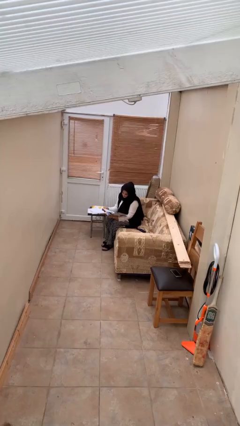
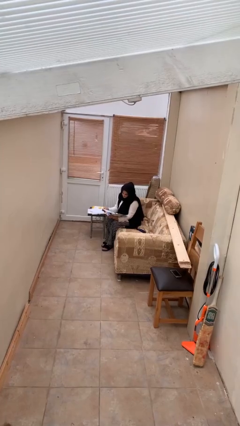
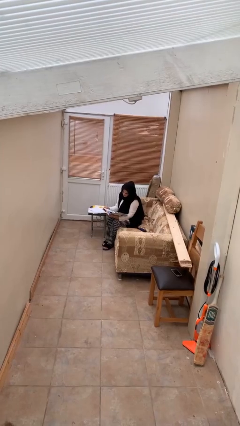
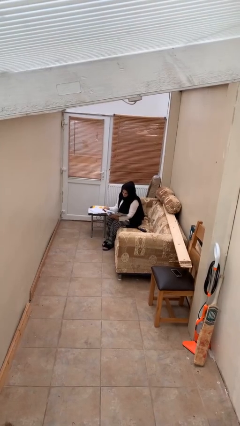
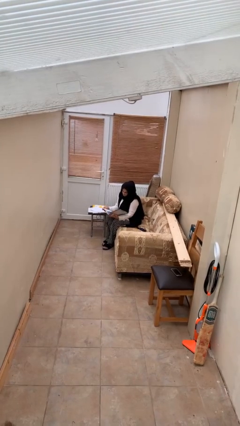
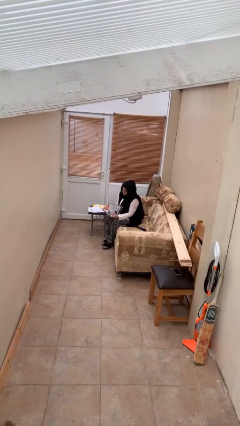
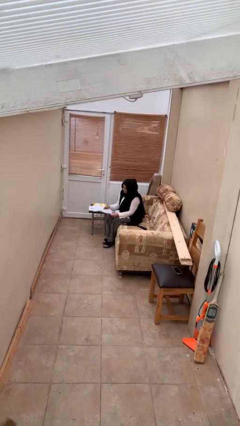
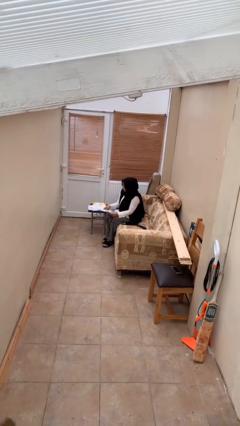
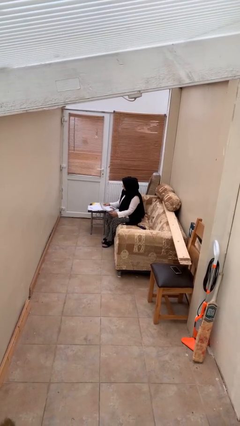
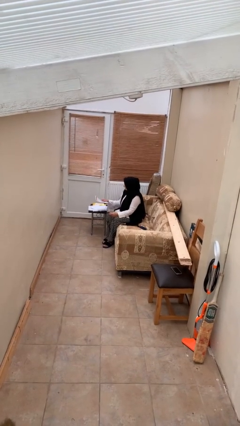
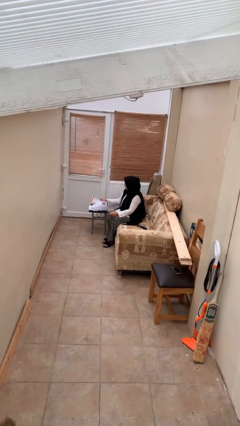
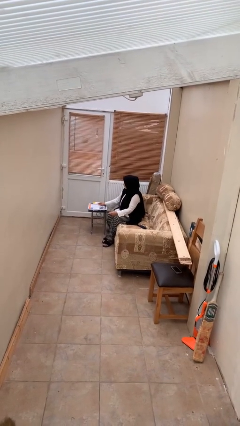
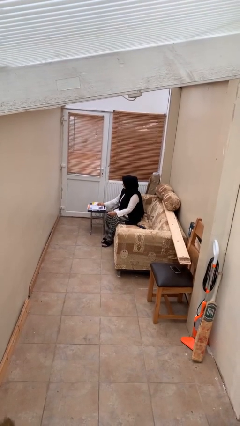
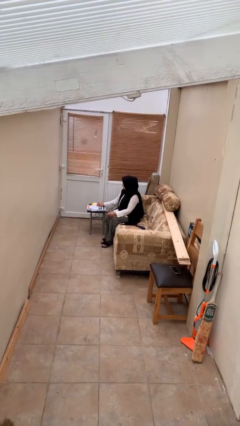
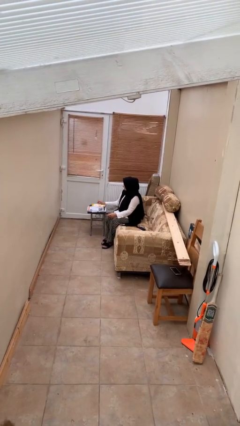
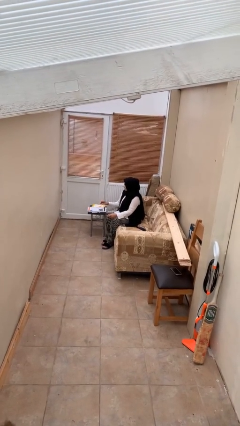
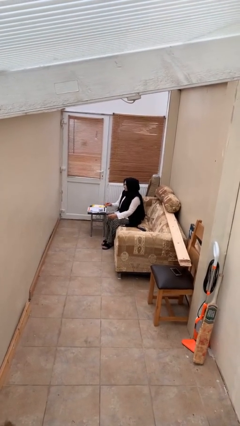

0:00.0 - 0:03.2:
person puts down object on table

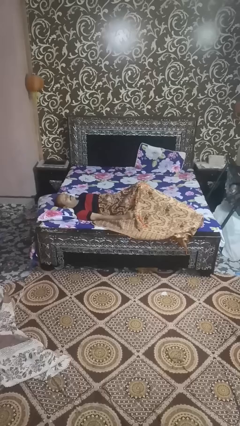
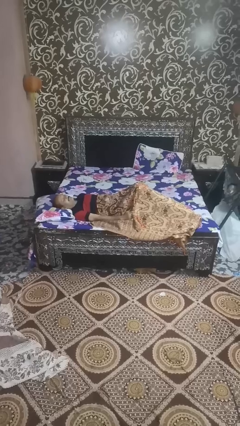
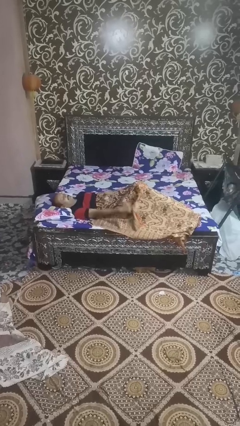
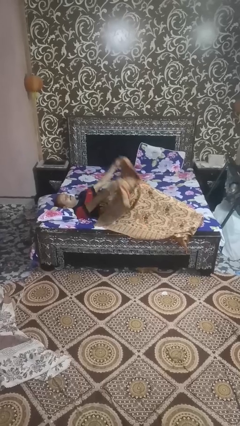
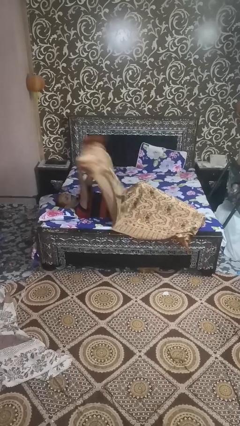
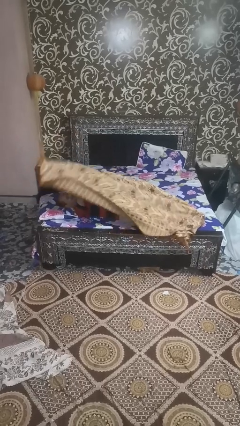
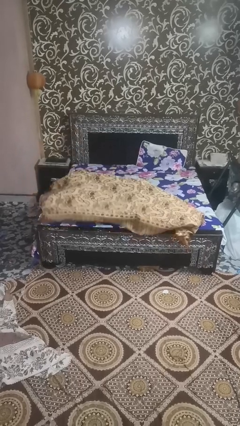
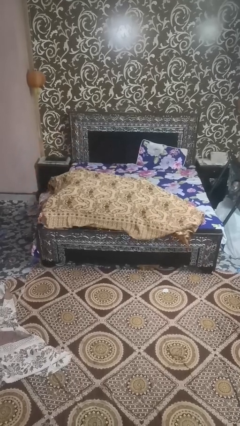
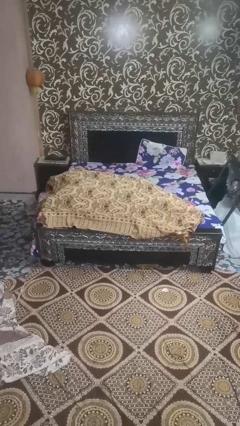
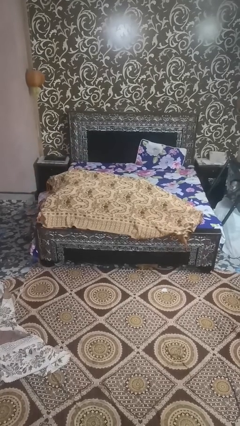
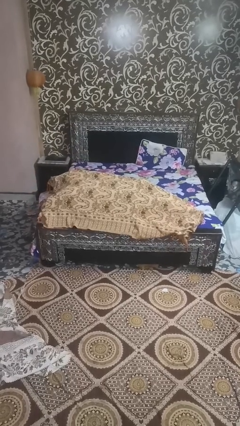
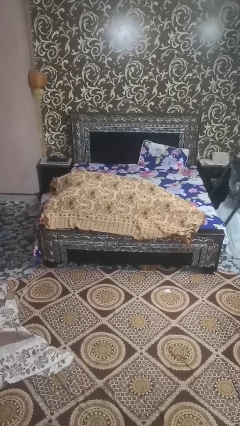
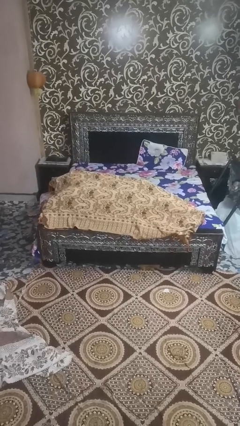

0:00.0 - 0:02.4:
person covers with blanket

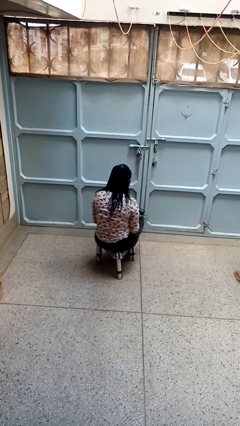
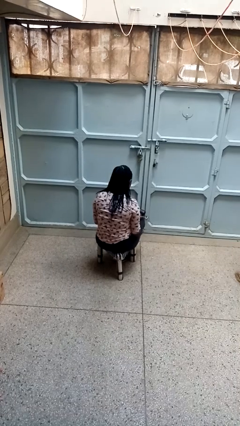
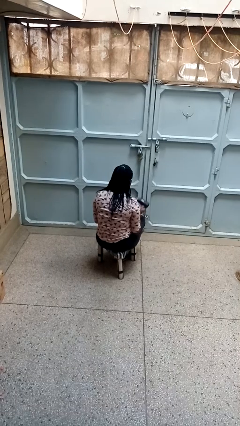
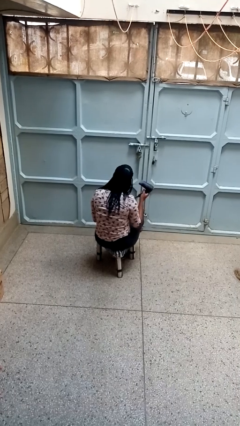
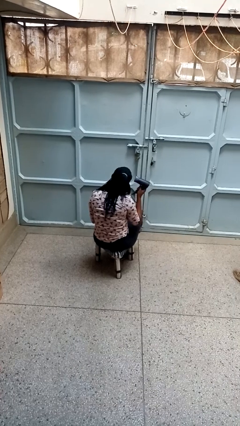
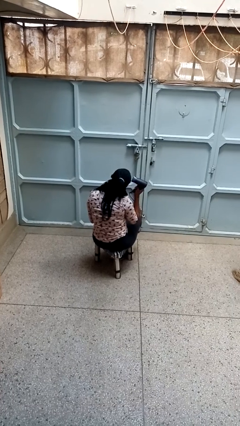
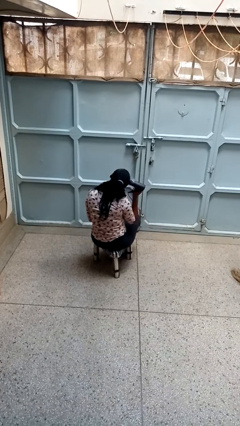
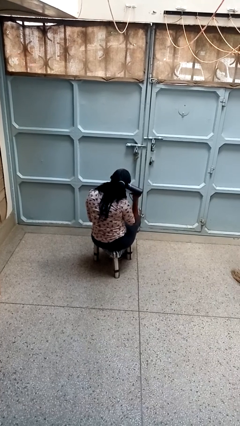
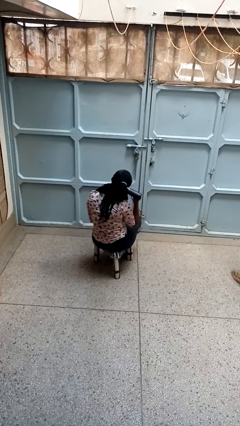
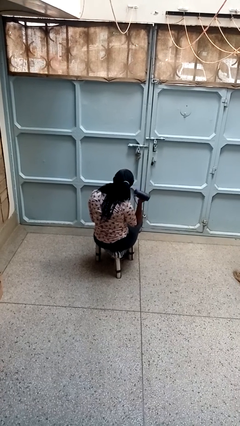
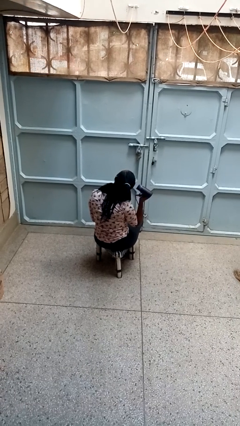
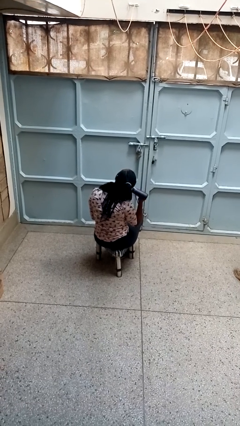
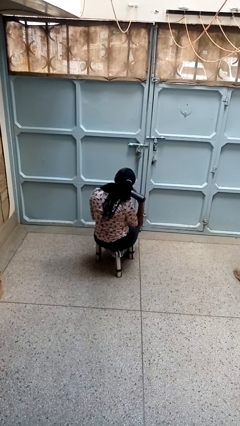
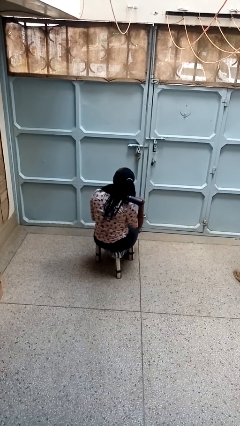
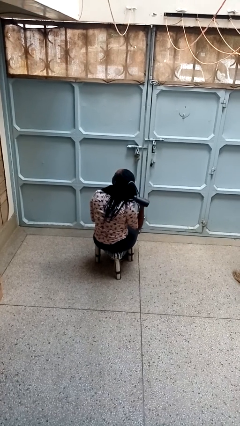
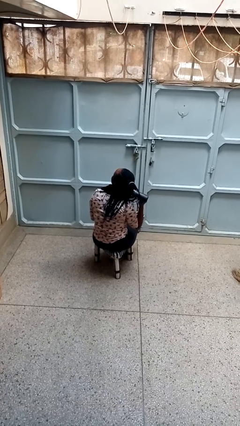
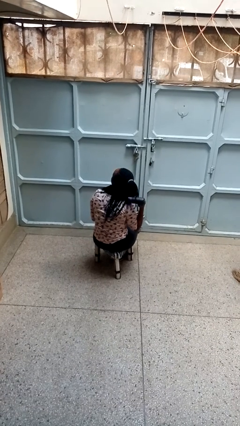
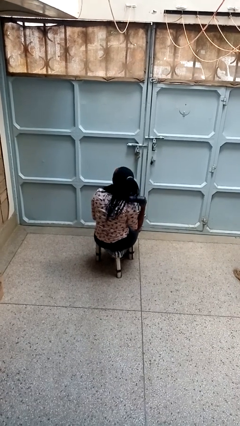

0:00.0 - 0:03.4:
person dries hair with hairdryer

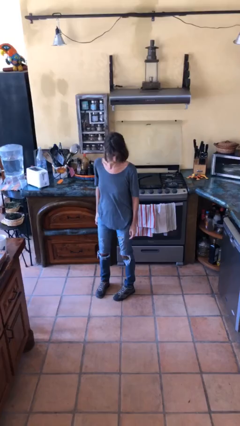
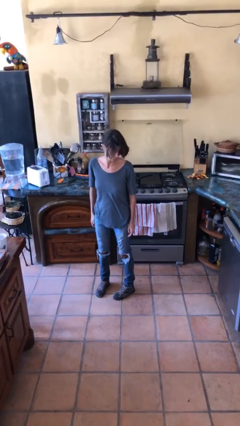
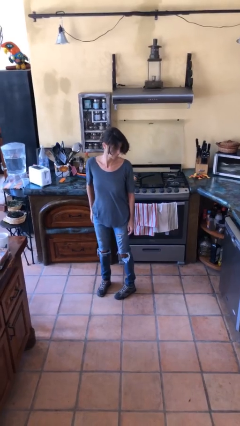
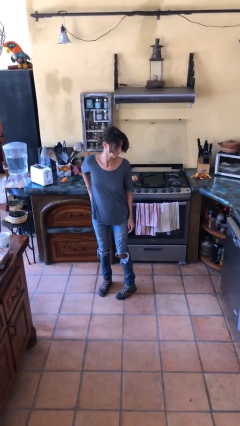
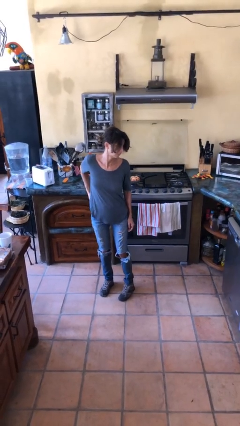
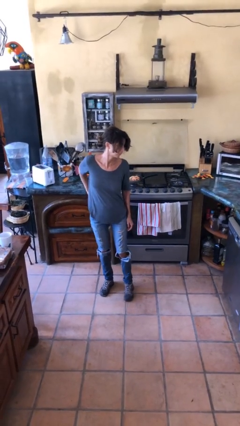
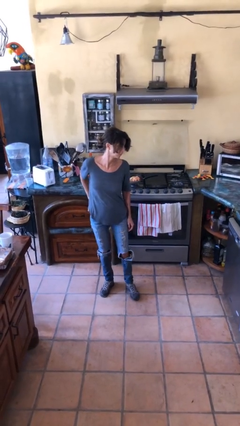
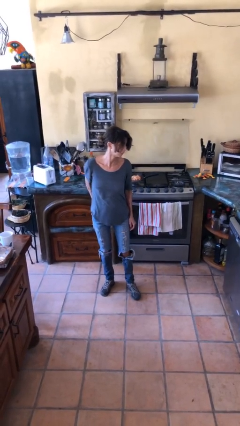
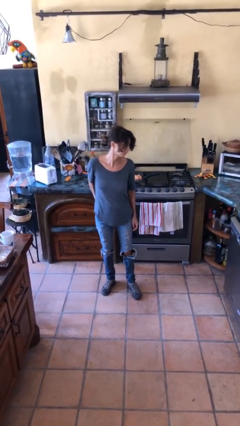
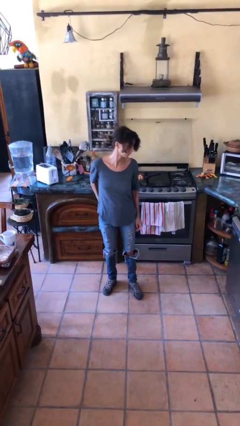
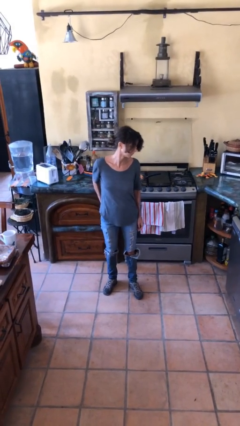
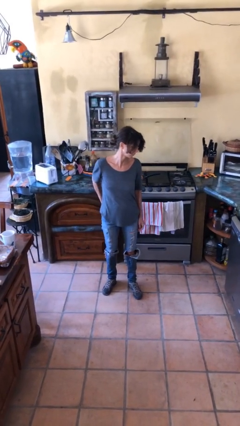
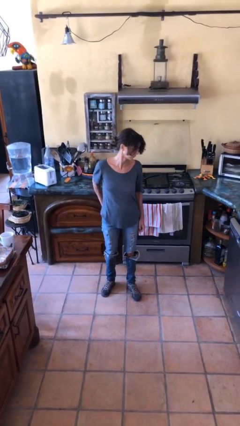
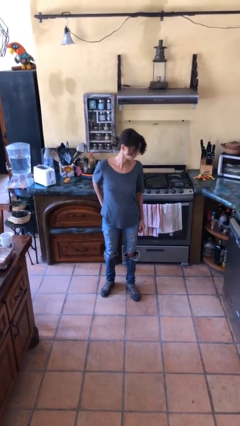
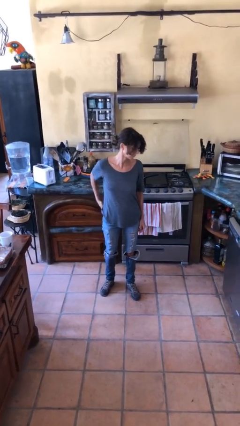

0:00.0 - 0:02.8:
person puts hands in back pockets

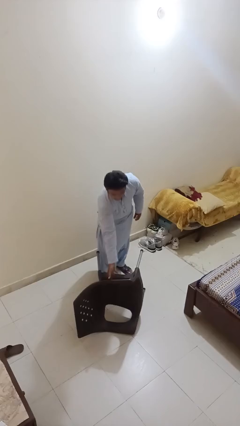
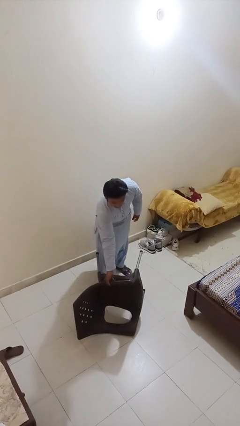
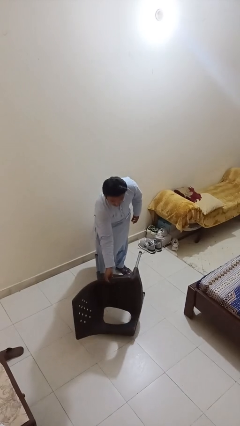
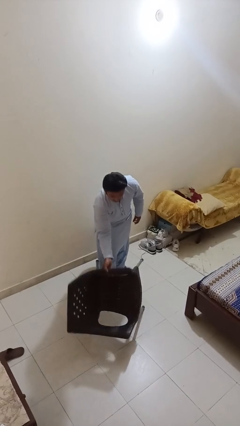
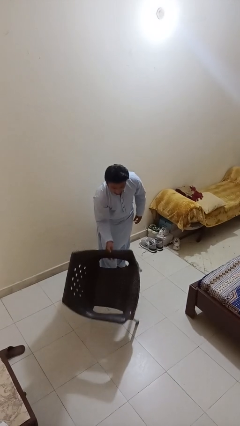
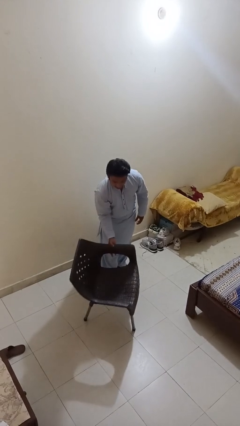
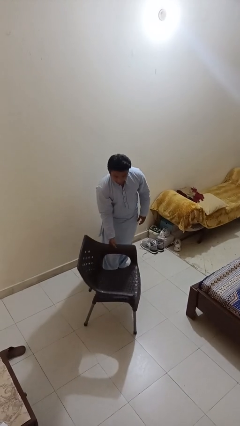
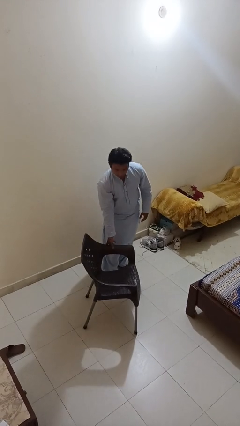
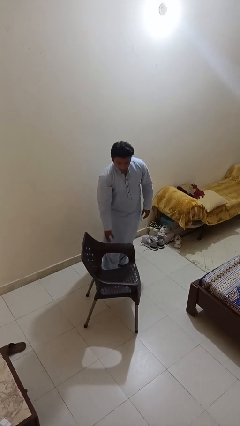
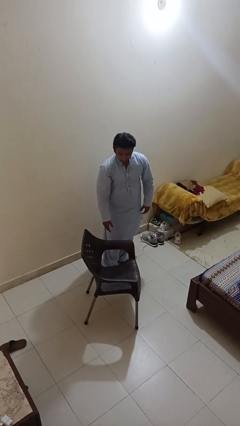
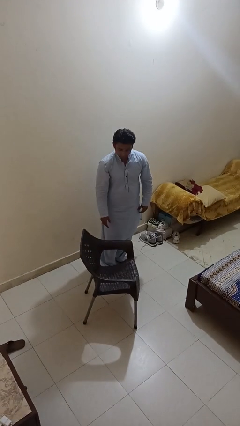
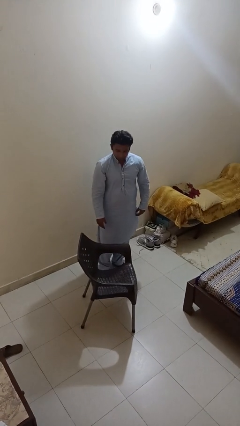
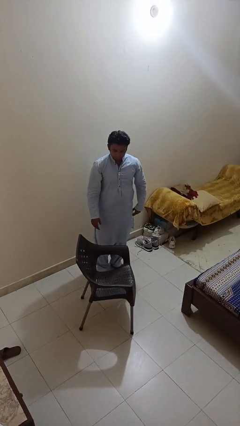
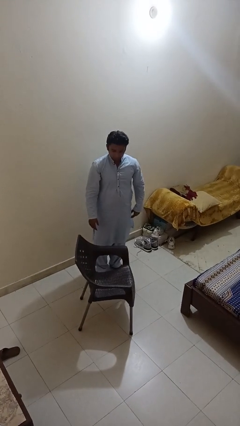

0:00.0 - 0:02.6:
person sets upright furniture

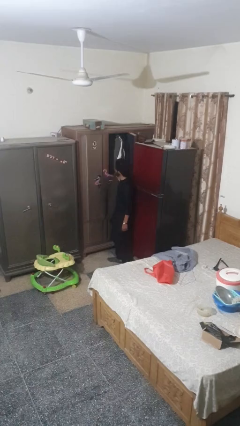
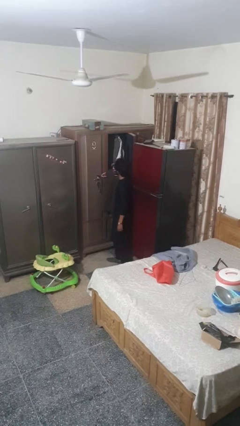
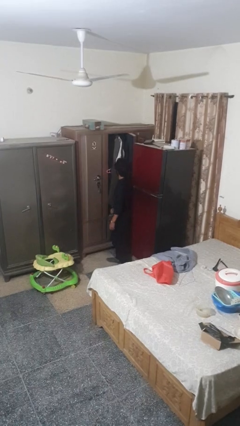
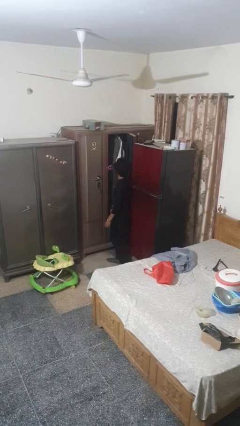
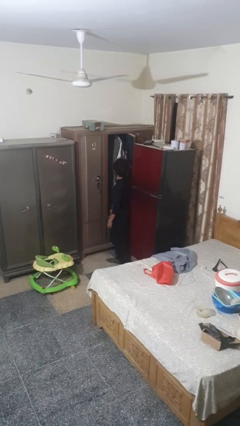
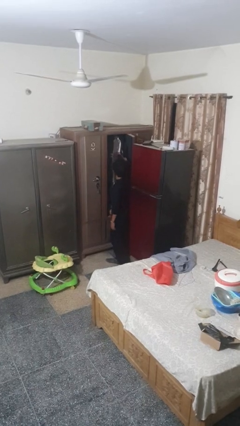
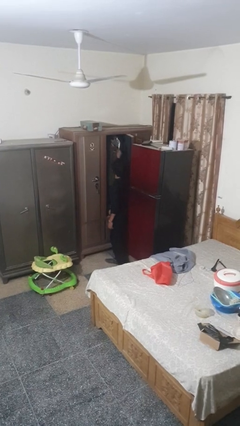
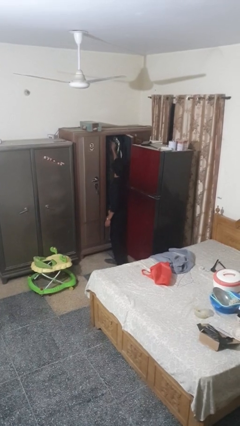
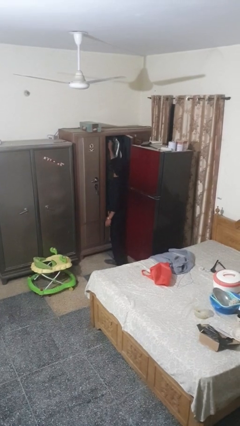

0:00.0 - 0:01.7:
person puts clothes into closet

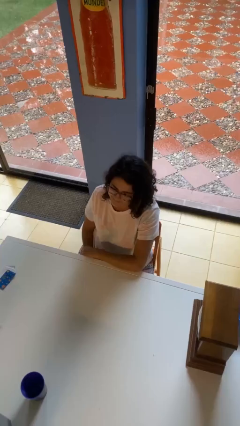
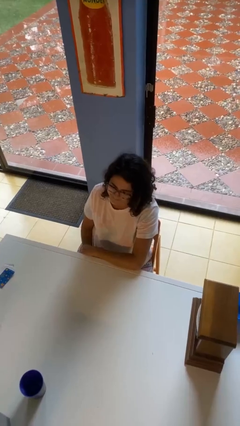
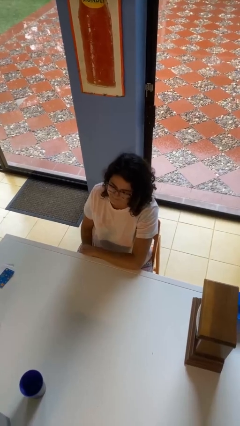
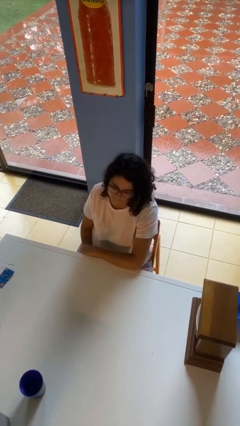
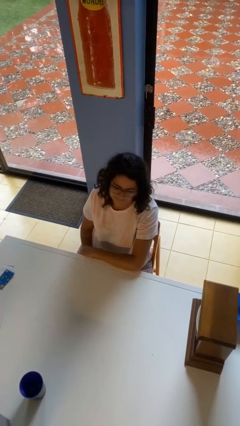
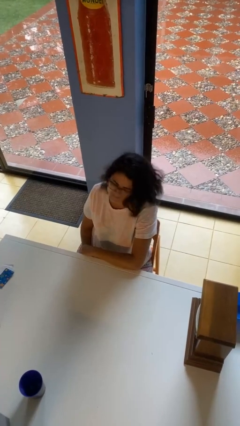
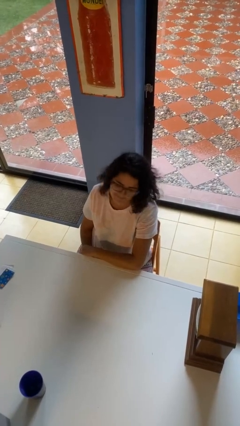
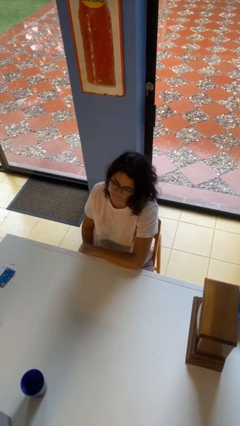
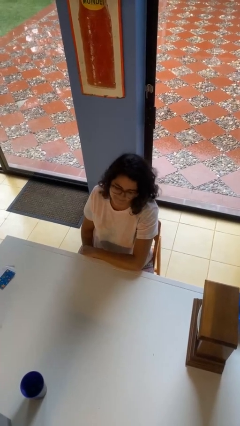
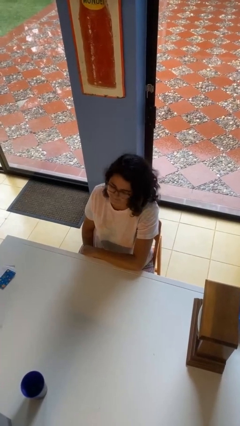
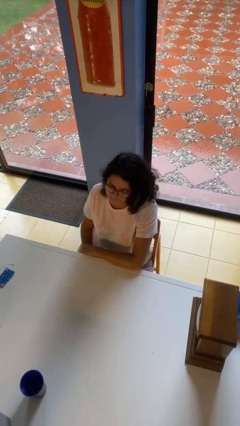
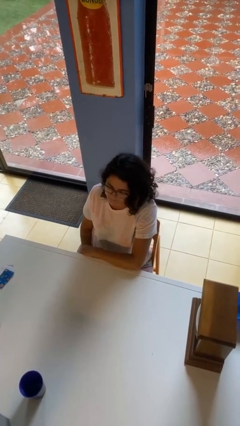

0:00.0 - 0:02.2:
person shakes head
